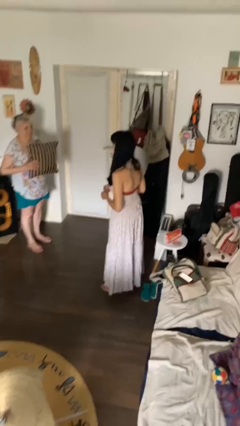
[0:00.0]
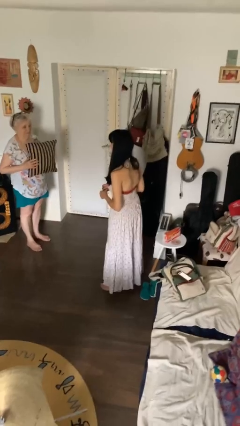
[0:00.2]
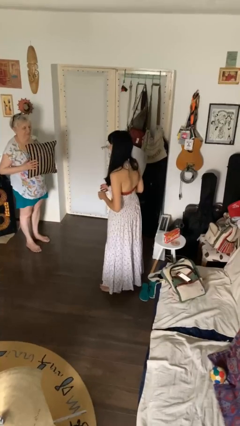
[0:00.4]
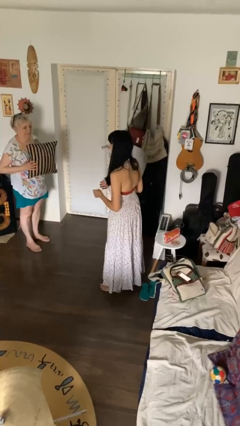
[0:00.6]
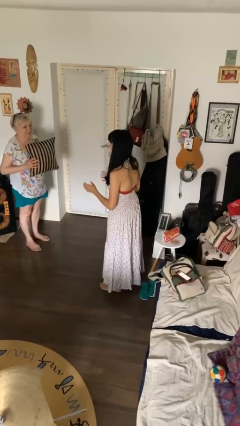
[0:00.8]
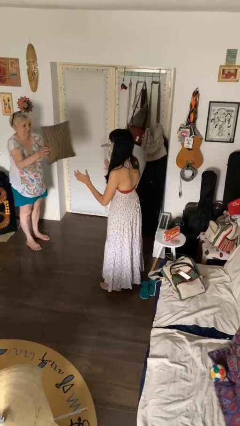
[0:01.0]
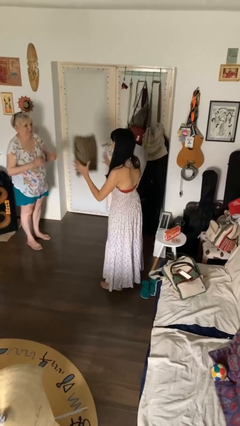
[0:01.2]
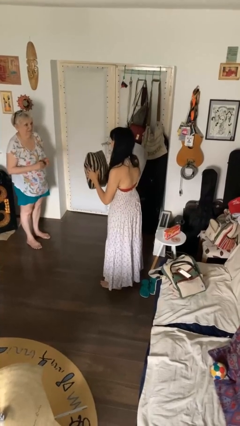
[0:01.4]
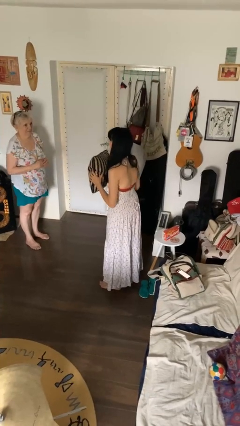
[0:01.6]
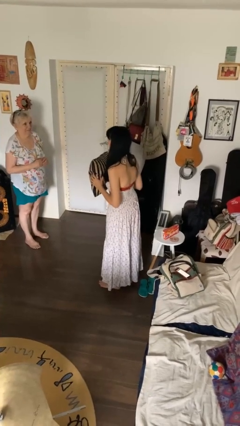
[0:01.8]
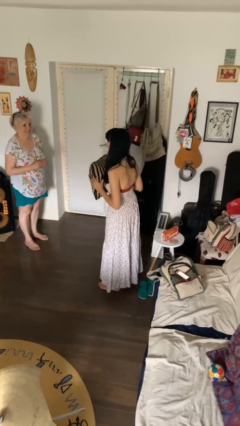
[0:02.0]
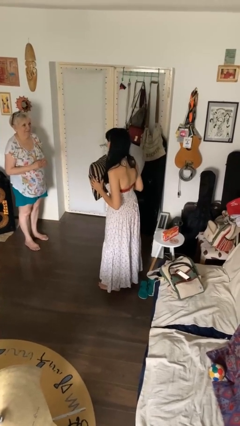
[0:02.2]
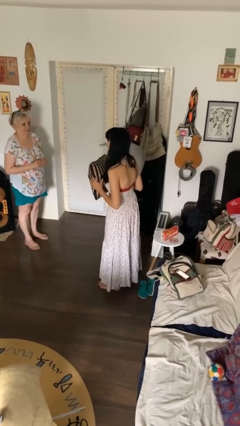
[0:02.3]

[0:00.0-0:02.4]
person catches object from person

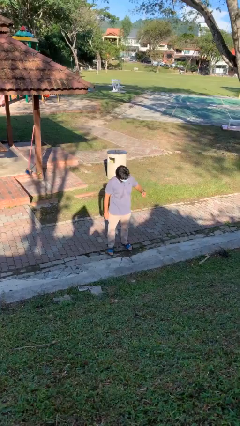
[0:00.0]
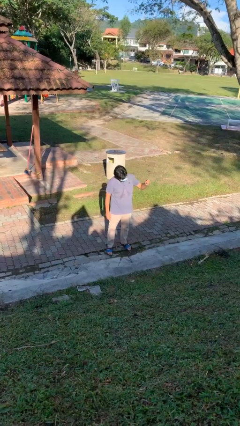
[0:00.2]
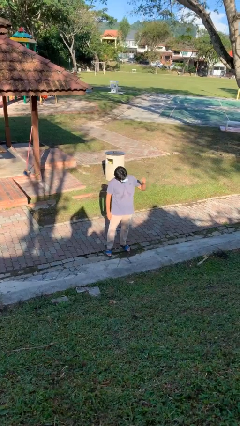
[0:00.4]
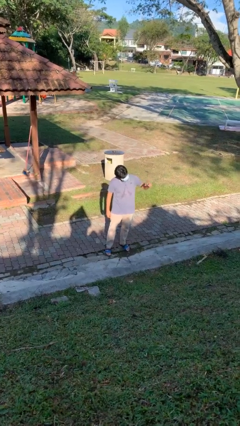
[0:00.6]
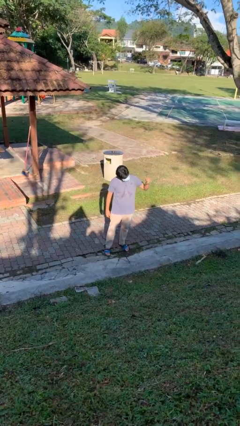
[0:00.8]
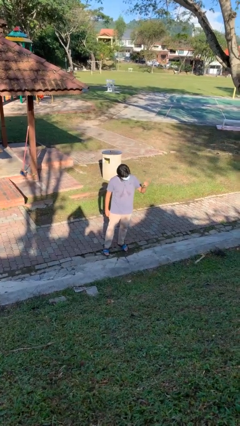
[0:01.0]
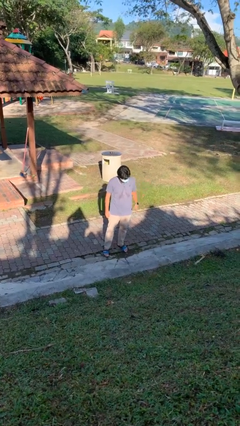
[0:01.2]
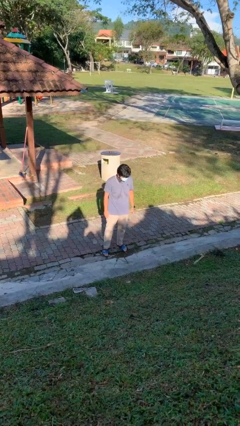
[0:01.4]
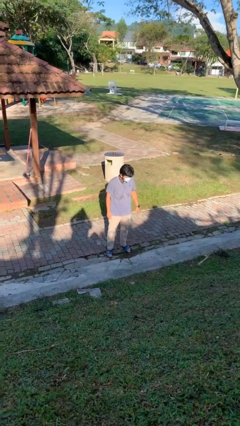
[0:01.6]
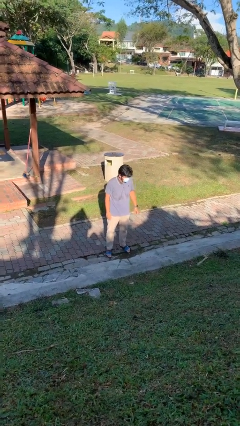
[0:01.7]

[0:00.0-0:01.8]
person snaps fingers

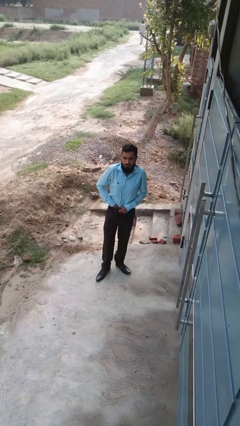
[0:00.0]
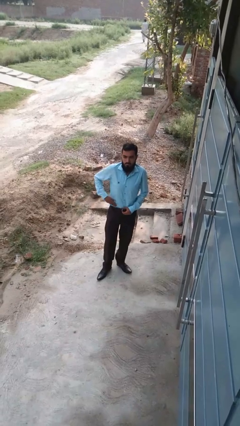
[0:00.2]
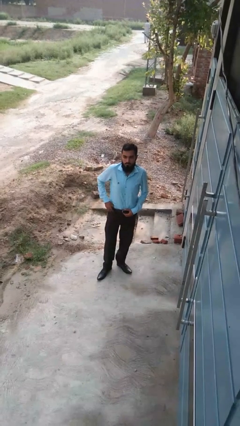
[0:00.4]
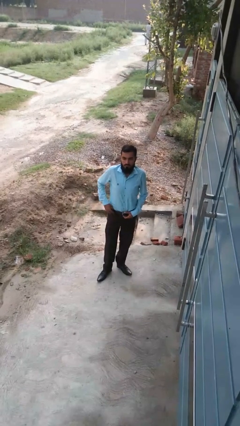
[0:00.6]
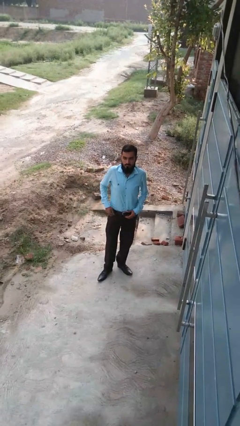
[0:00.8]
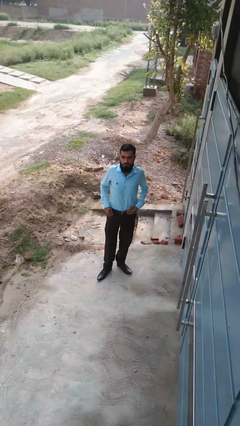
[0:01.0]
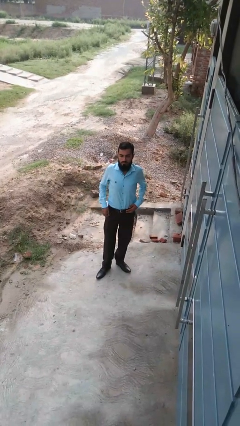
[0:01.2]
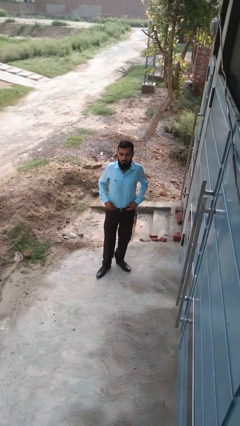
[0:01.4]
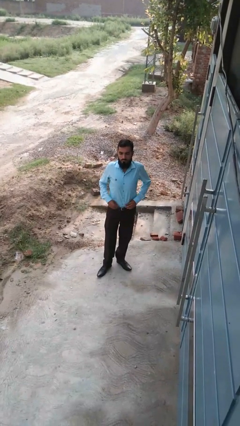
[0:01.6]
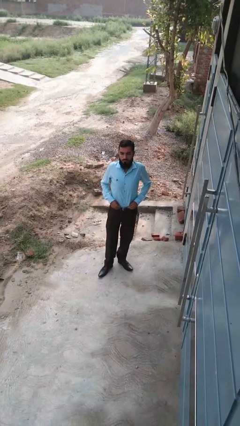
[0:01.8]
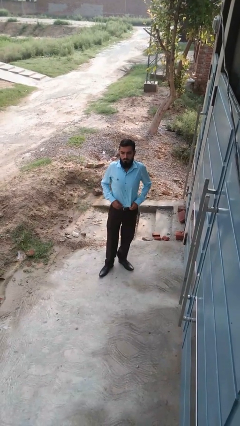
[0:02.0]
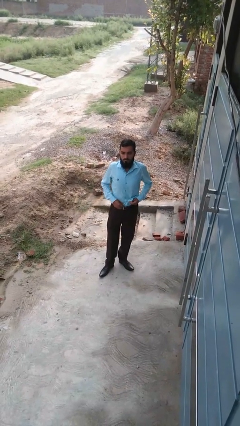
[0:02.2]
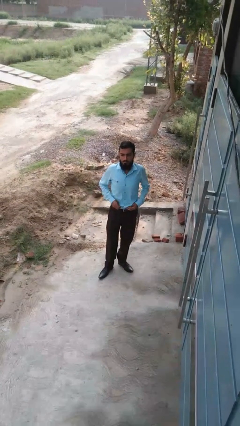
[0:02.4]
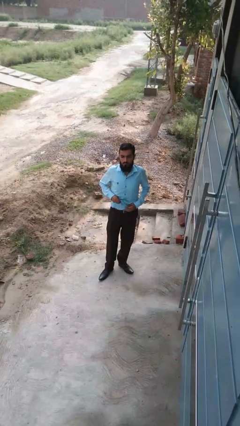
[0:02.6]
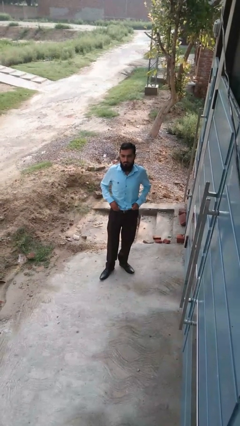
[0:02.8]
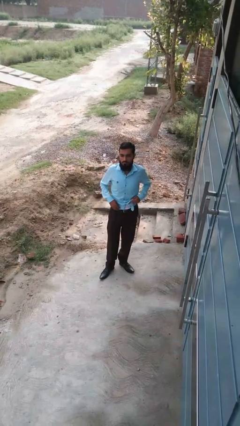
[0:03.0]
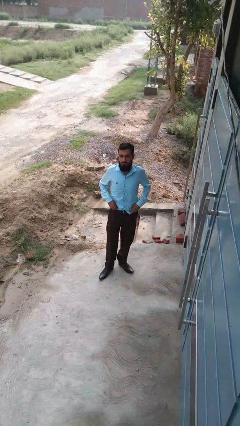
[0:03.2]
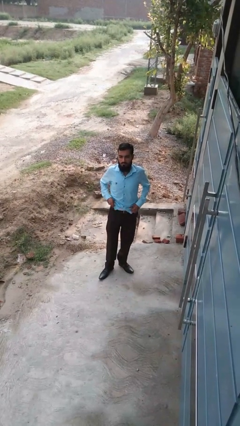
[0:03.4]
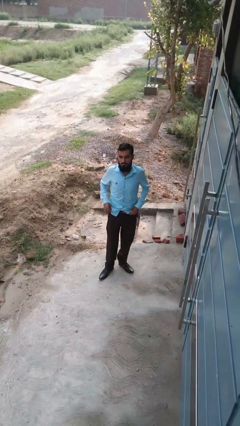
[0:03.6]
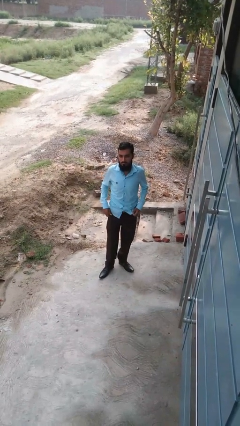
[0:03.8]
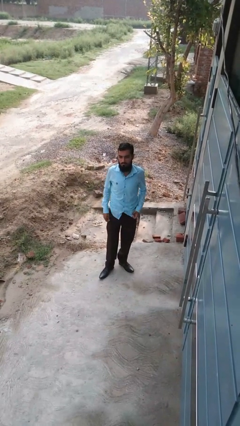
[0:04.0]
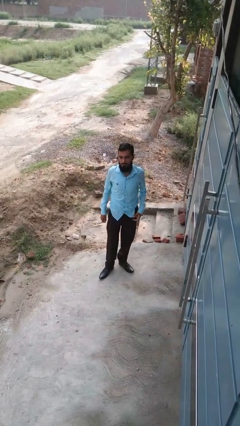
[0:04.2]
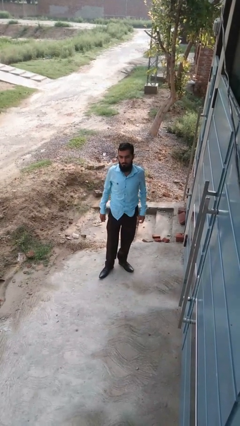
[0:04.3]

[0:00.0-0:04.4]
person untucks shirt

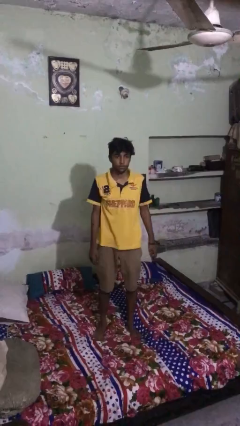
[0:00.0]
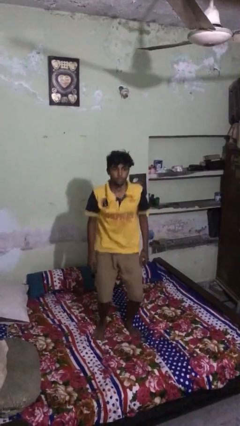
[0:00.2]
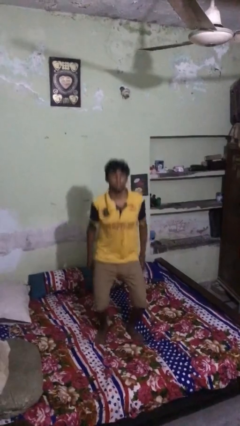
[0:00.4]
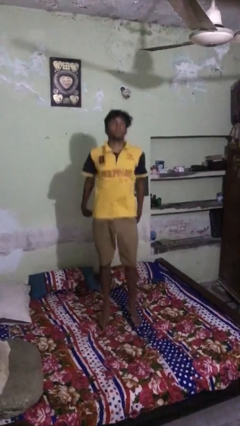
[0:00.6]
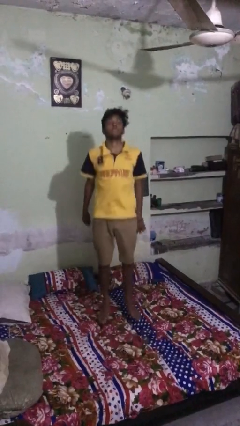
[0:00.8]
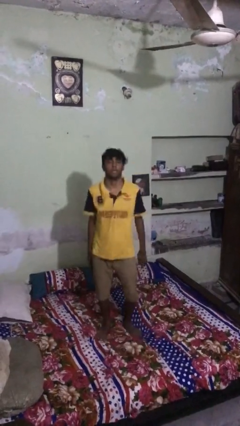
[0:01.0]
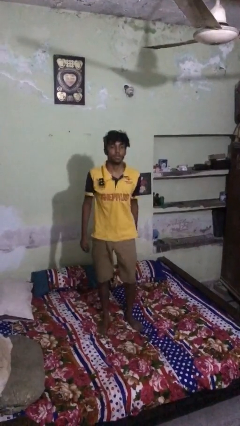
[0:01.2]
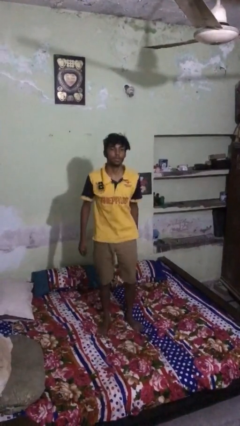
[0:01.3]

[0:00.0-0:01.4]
person jumps on bed

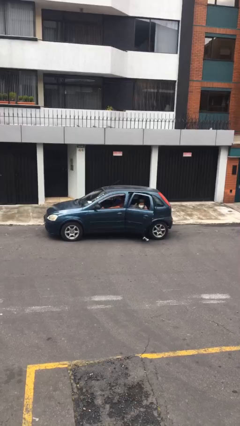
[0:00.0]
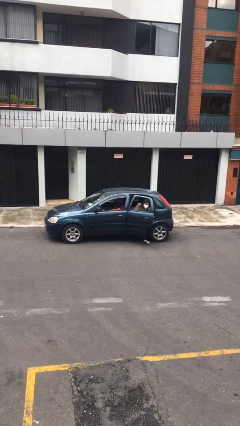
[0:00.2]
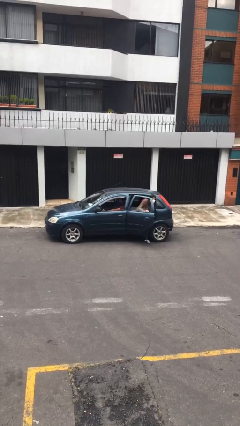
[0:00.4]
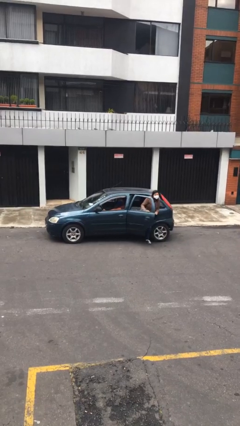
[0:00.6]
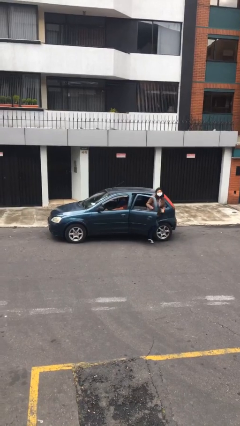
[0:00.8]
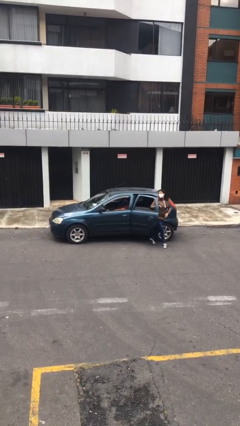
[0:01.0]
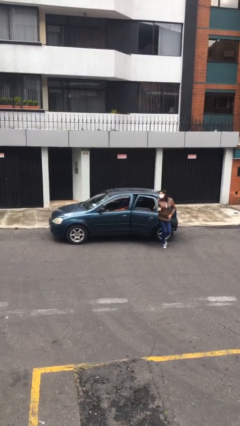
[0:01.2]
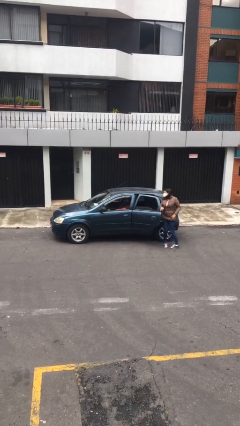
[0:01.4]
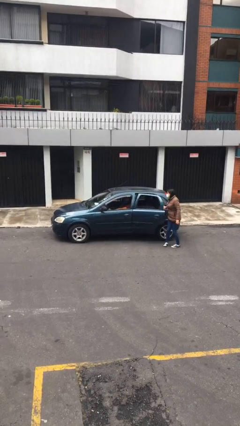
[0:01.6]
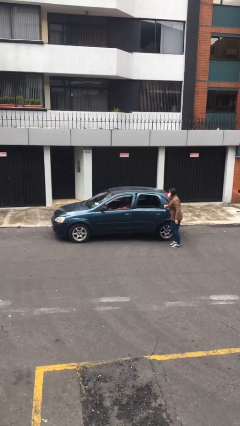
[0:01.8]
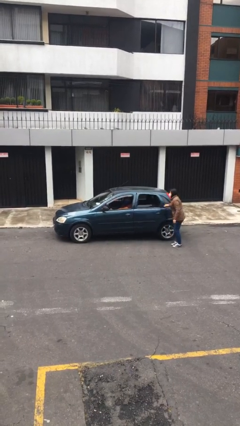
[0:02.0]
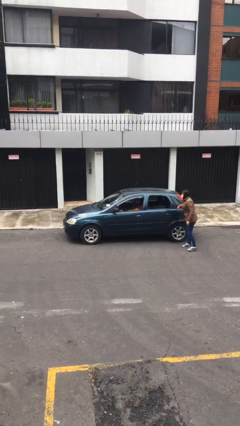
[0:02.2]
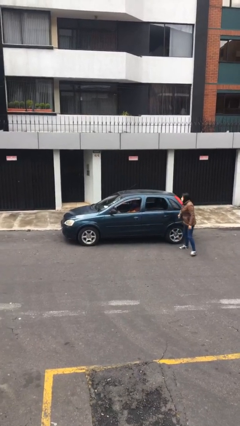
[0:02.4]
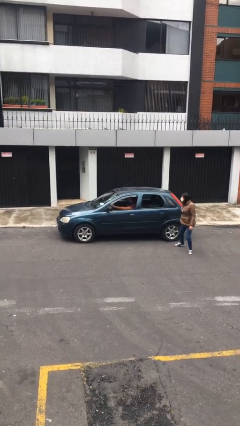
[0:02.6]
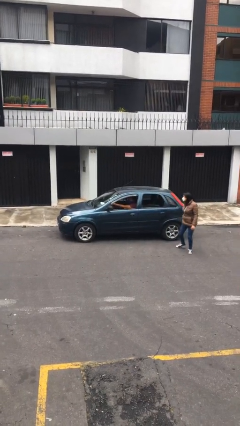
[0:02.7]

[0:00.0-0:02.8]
car drops off person

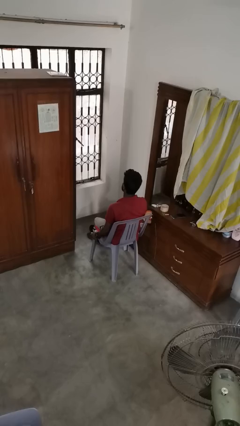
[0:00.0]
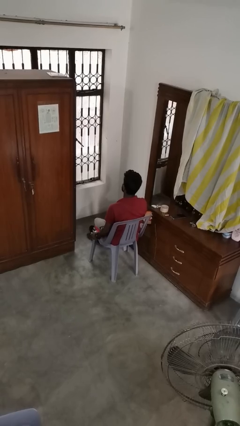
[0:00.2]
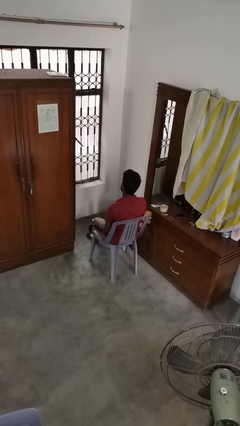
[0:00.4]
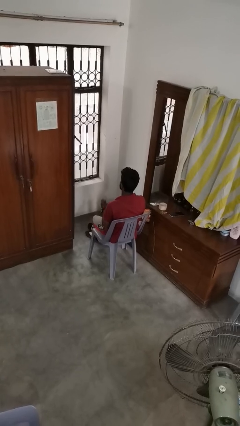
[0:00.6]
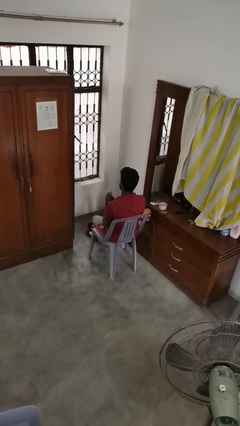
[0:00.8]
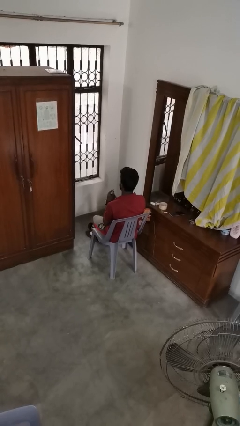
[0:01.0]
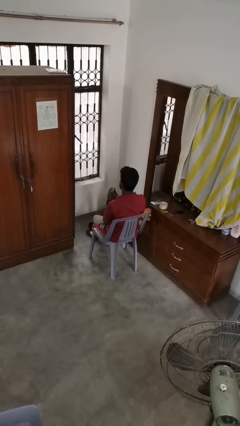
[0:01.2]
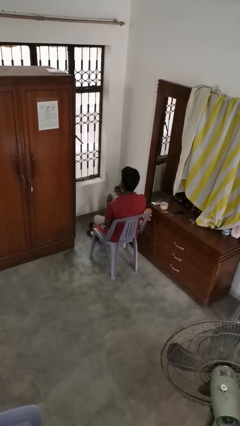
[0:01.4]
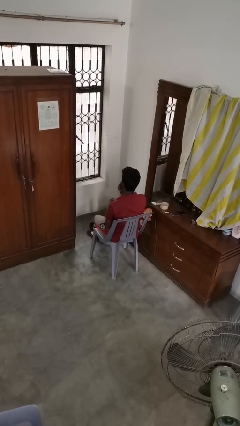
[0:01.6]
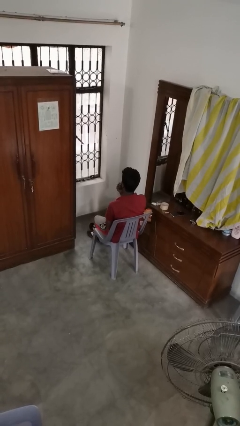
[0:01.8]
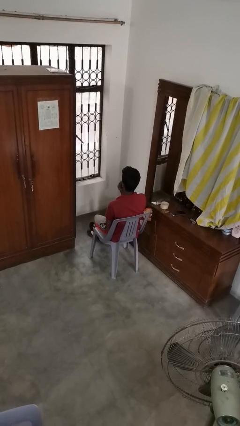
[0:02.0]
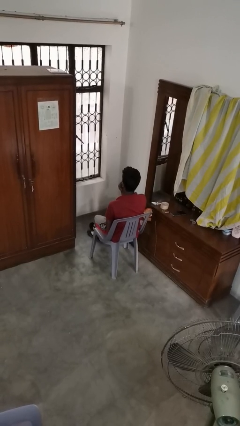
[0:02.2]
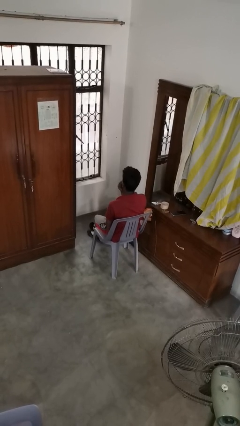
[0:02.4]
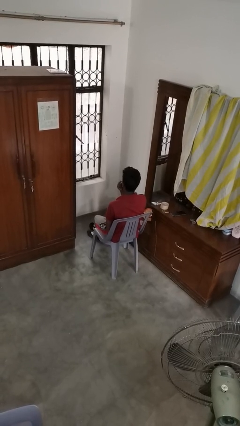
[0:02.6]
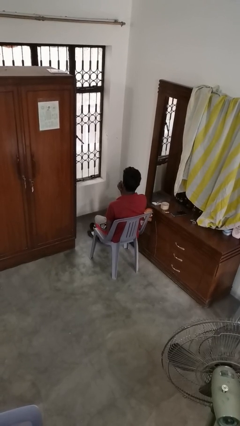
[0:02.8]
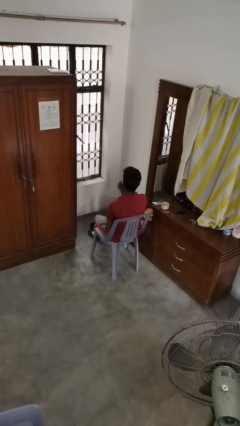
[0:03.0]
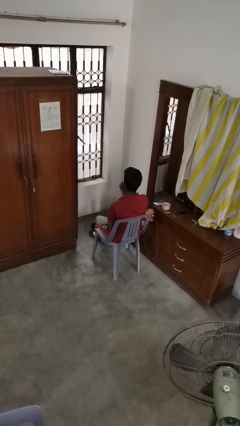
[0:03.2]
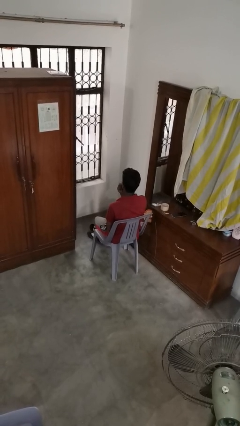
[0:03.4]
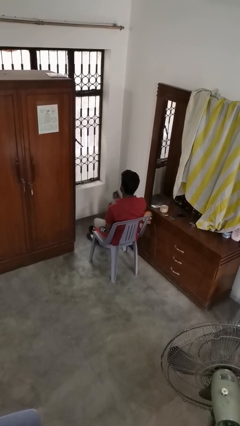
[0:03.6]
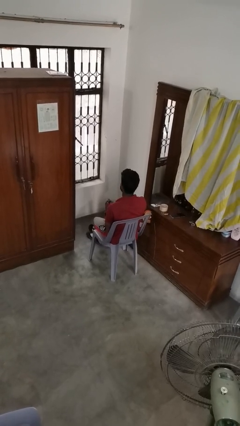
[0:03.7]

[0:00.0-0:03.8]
person applies lip makeup

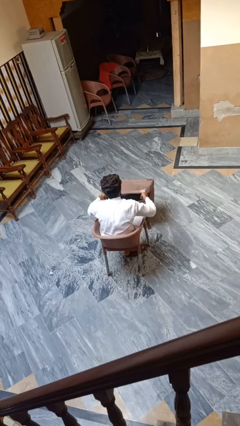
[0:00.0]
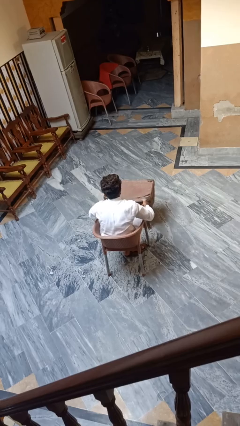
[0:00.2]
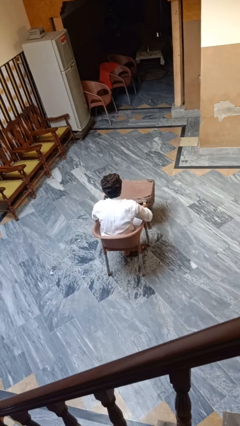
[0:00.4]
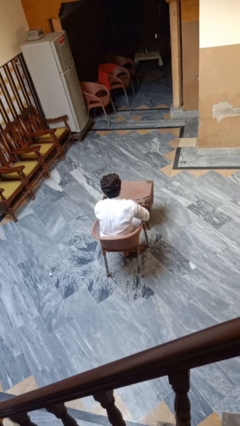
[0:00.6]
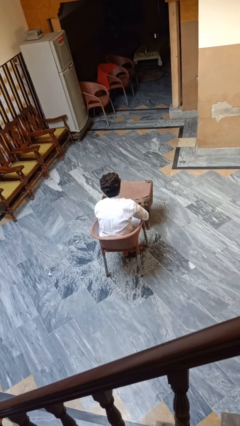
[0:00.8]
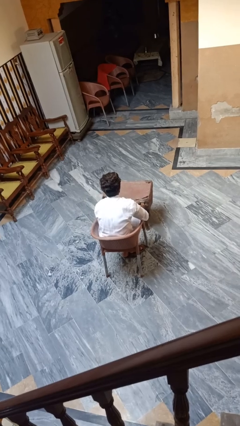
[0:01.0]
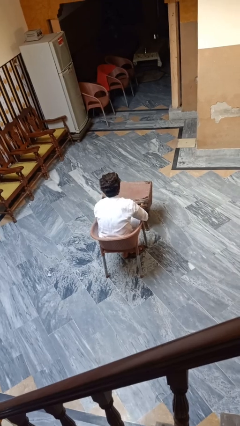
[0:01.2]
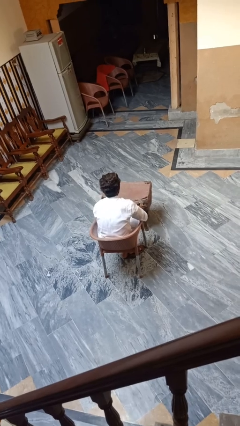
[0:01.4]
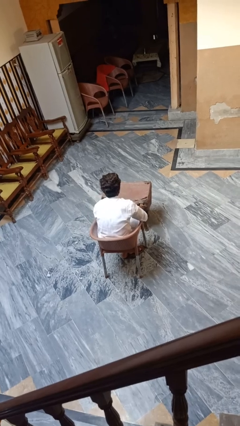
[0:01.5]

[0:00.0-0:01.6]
person closes suitcase
